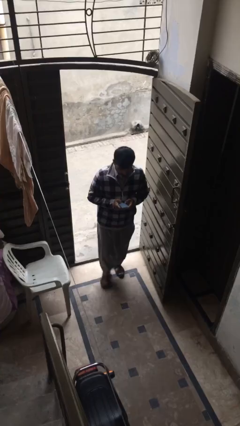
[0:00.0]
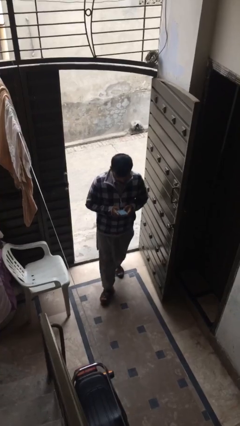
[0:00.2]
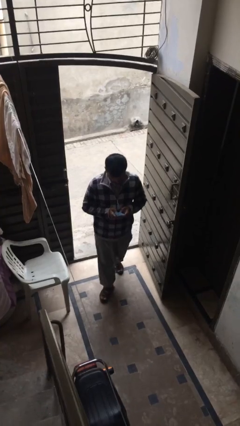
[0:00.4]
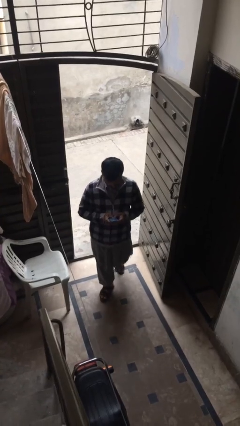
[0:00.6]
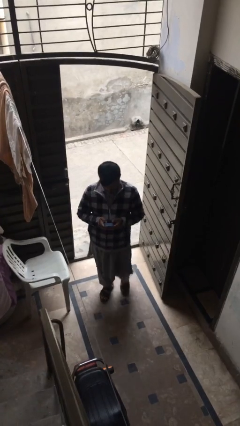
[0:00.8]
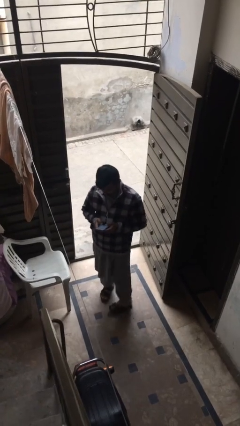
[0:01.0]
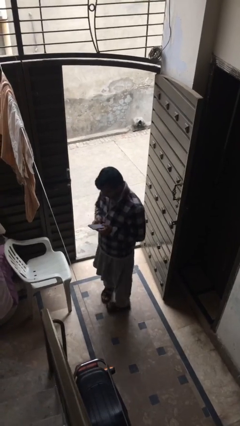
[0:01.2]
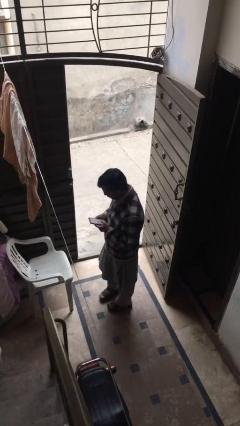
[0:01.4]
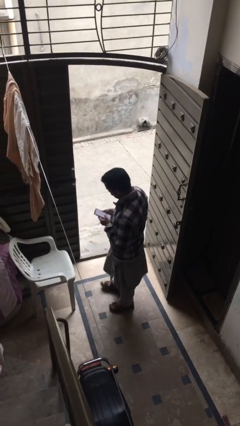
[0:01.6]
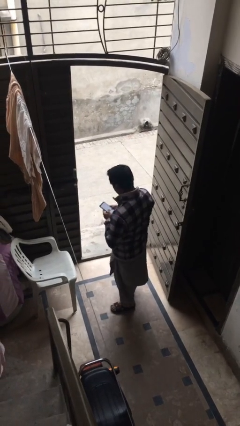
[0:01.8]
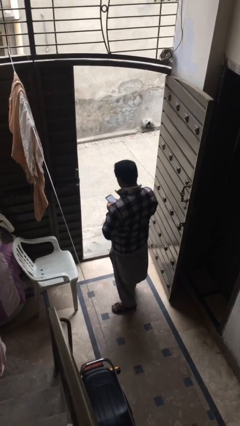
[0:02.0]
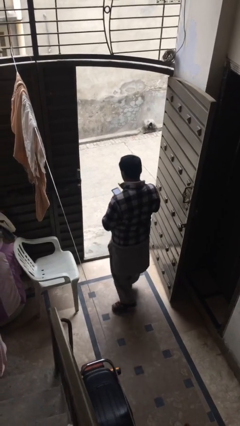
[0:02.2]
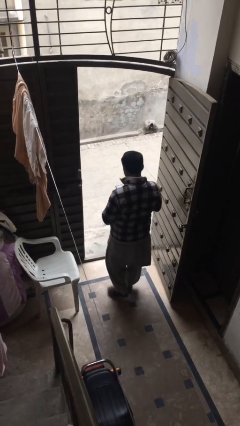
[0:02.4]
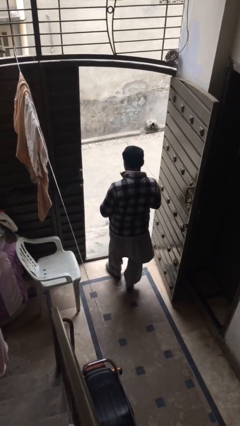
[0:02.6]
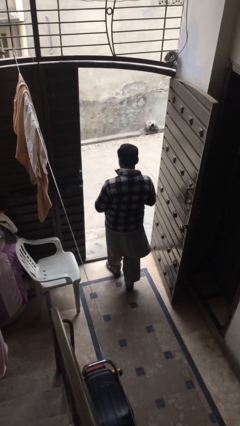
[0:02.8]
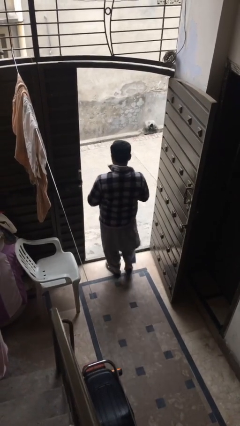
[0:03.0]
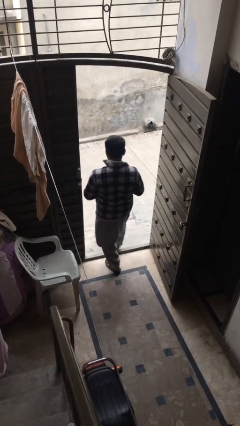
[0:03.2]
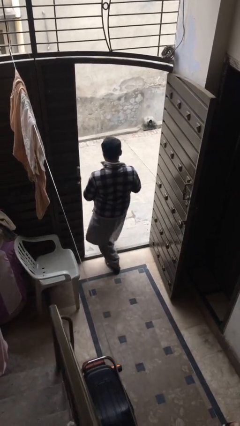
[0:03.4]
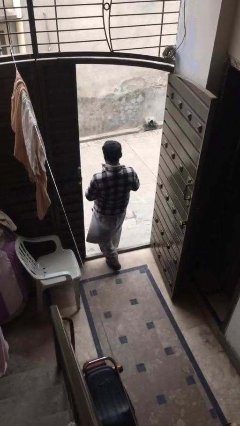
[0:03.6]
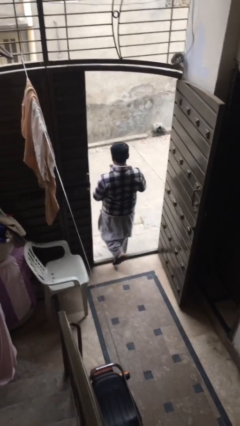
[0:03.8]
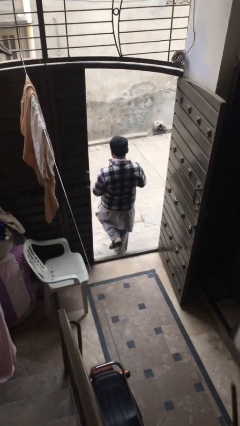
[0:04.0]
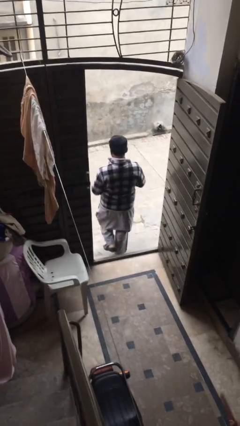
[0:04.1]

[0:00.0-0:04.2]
person exits scene through structure

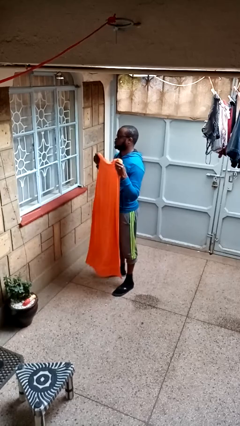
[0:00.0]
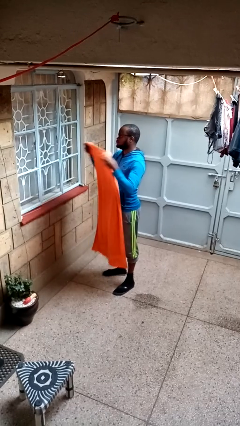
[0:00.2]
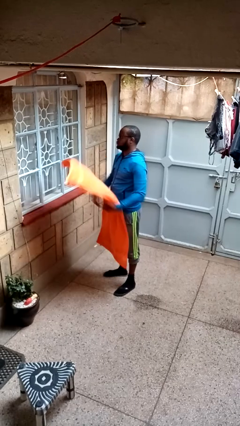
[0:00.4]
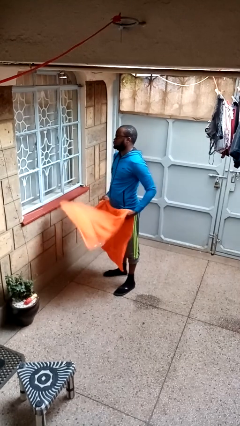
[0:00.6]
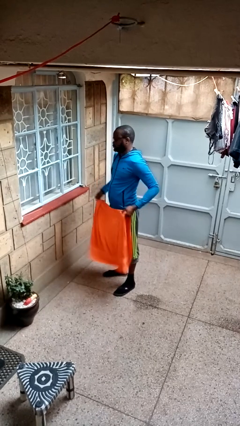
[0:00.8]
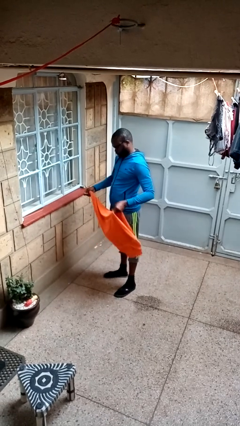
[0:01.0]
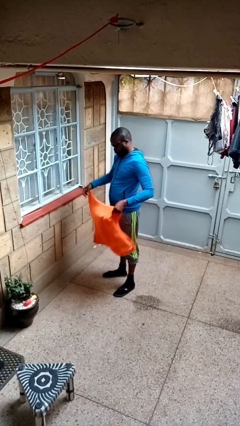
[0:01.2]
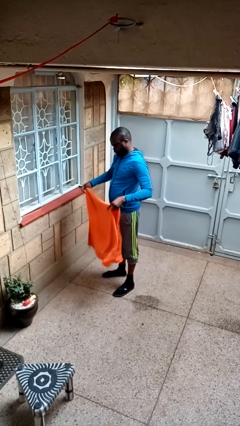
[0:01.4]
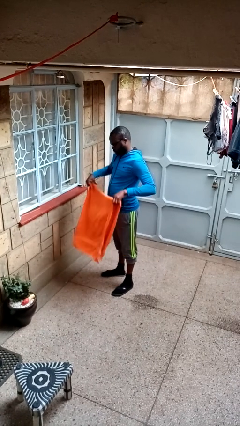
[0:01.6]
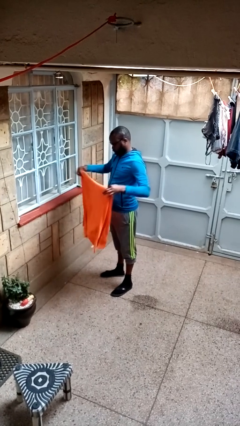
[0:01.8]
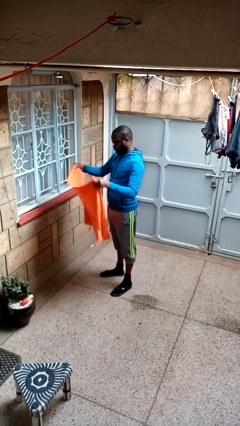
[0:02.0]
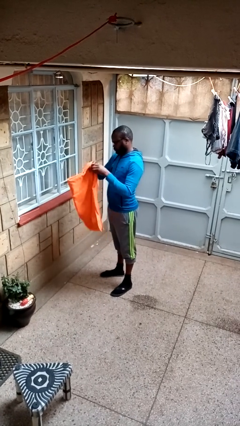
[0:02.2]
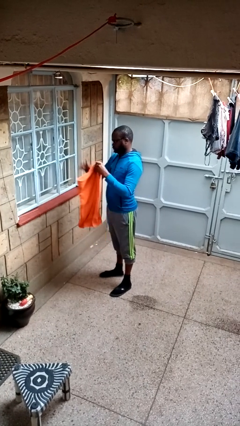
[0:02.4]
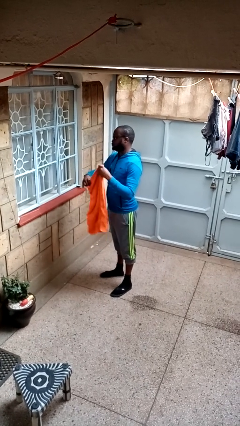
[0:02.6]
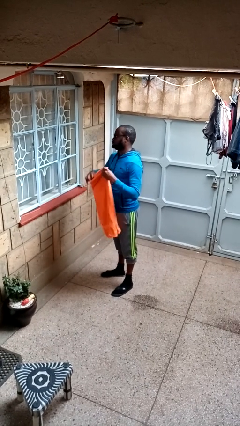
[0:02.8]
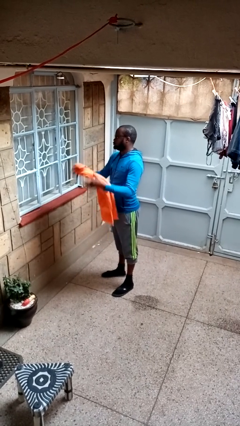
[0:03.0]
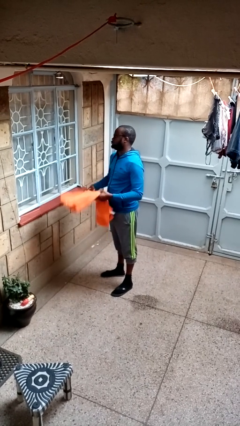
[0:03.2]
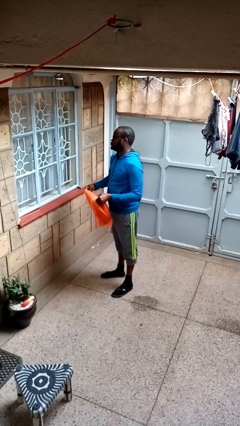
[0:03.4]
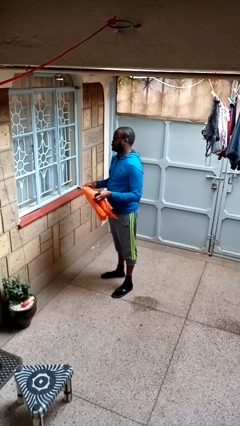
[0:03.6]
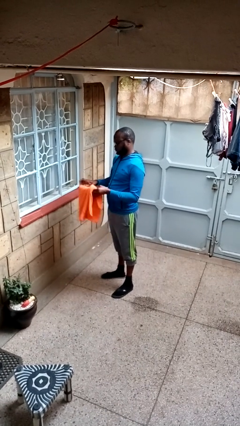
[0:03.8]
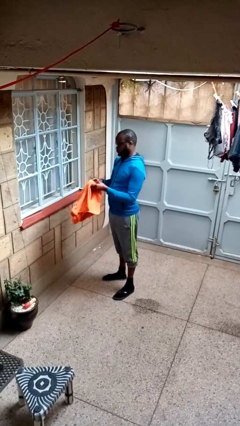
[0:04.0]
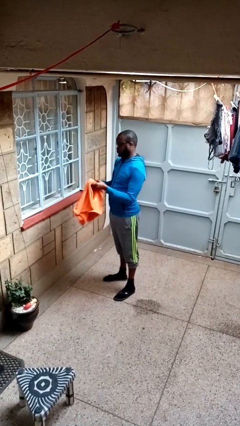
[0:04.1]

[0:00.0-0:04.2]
person folds towel

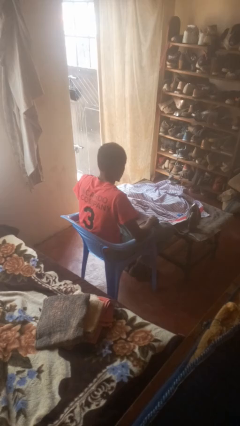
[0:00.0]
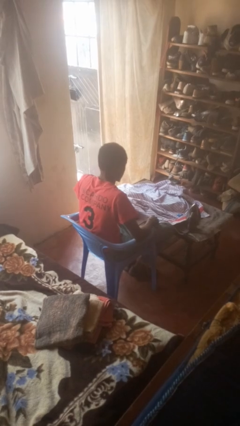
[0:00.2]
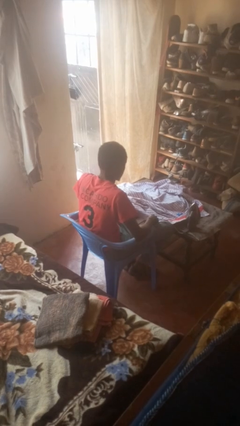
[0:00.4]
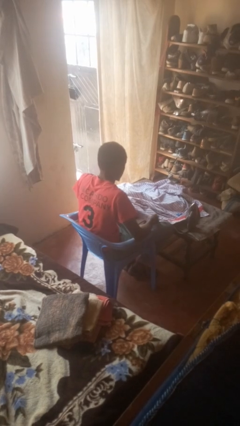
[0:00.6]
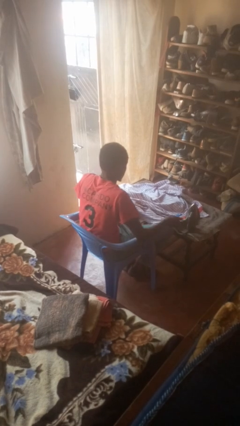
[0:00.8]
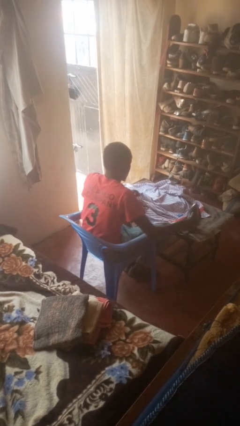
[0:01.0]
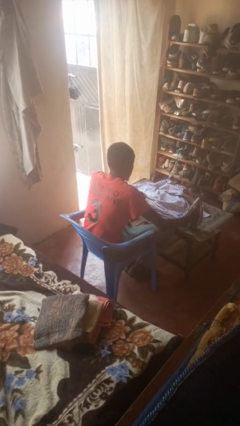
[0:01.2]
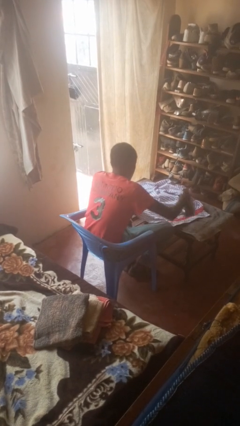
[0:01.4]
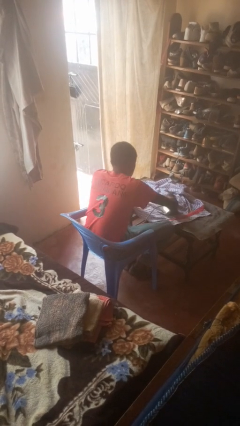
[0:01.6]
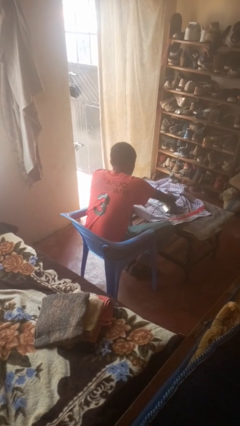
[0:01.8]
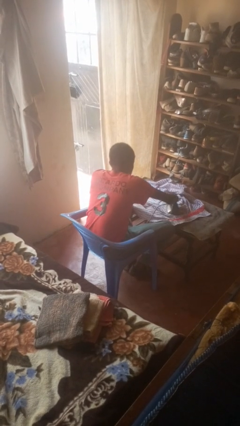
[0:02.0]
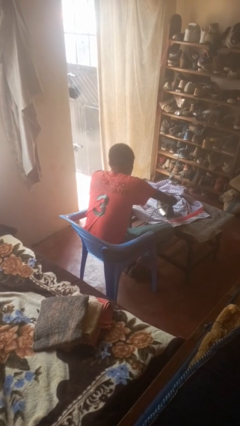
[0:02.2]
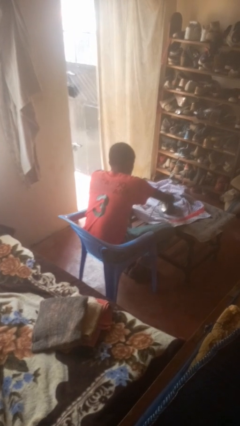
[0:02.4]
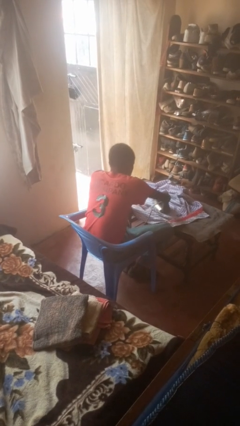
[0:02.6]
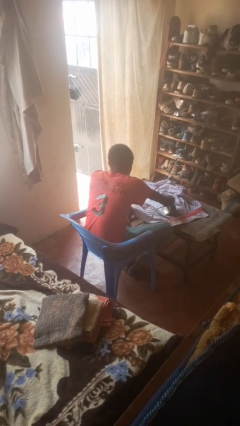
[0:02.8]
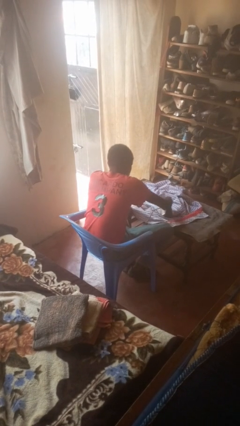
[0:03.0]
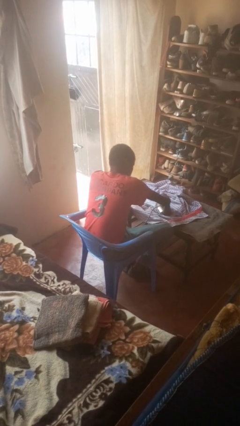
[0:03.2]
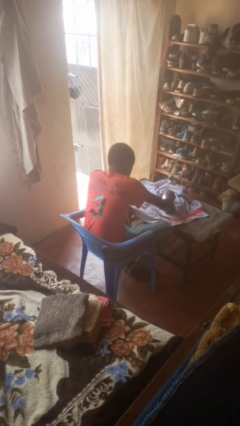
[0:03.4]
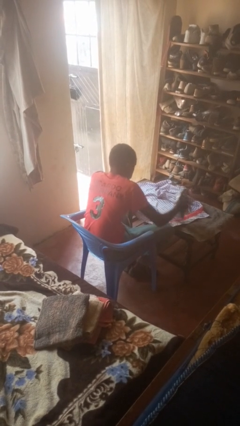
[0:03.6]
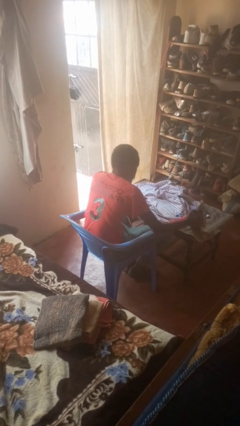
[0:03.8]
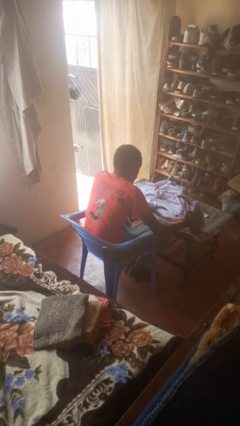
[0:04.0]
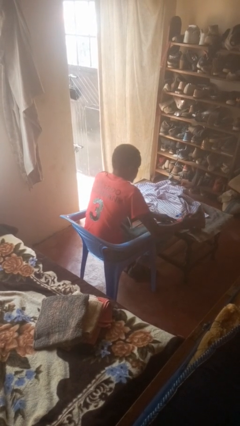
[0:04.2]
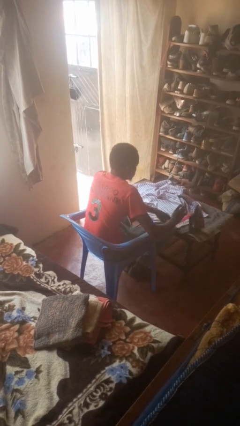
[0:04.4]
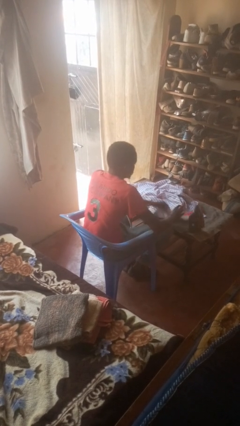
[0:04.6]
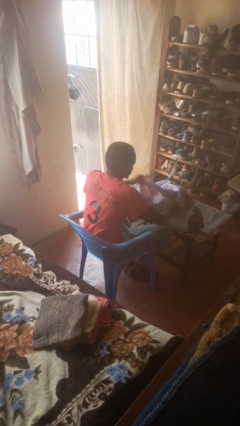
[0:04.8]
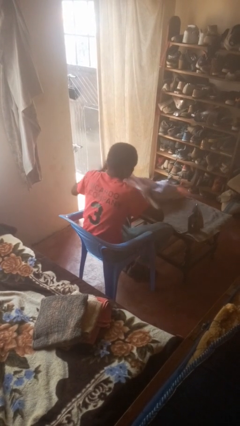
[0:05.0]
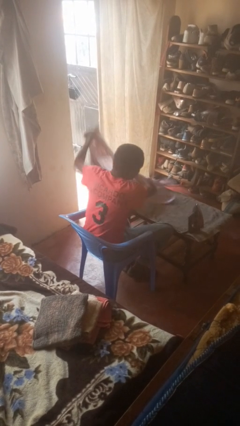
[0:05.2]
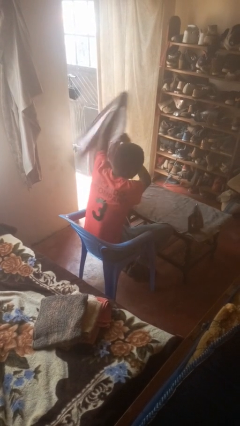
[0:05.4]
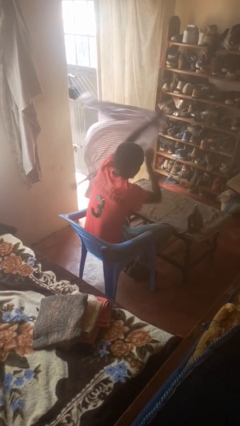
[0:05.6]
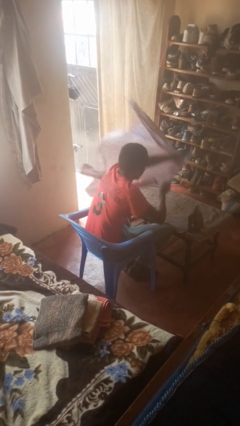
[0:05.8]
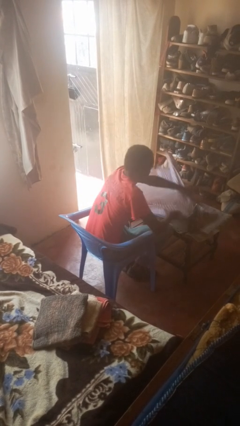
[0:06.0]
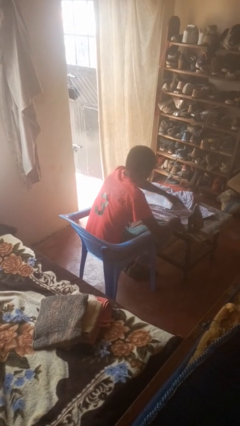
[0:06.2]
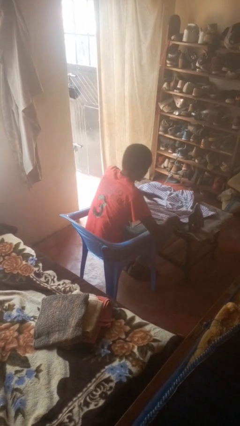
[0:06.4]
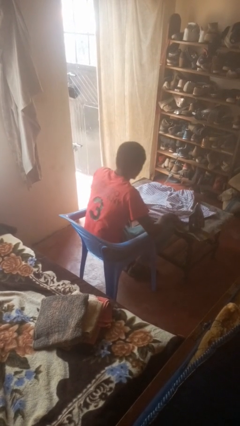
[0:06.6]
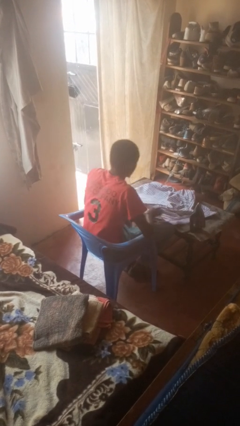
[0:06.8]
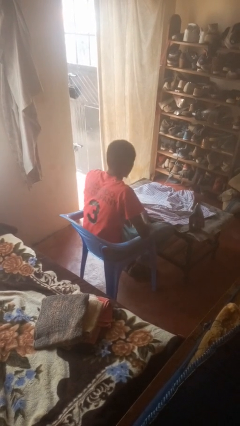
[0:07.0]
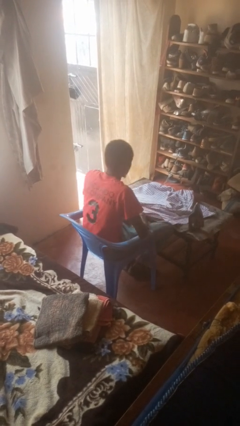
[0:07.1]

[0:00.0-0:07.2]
person irons clothes

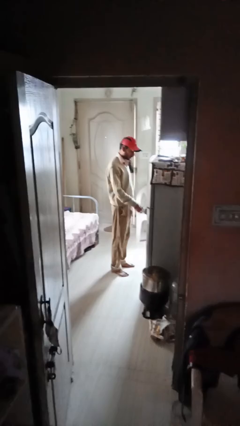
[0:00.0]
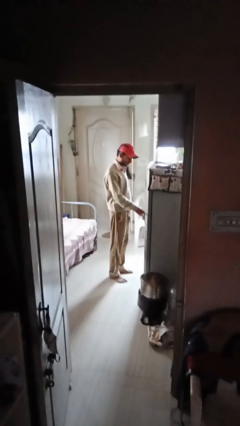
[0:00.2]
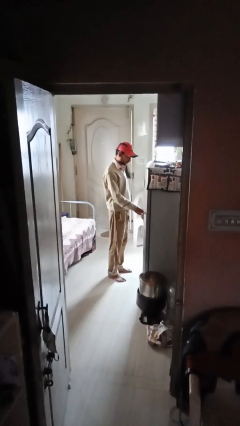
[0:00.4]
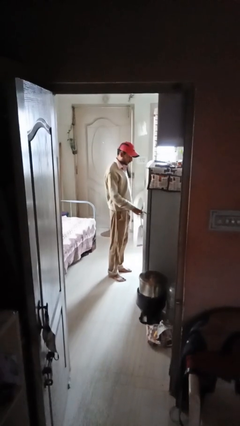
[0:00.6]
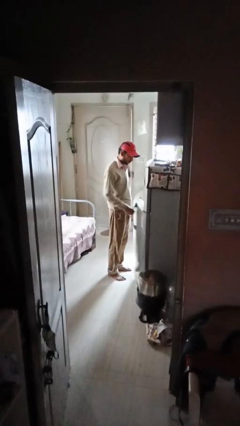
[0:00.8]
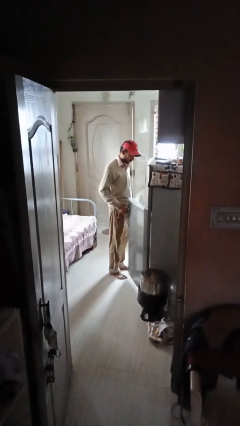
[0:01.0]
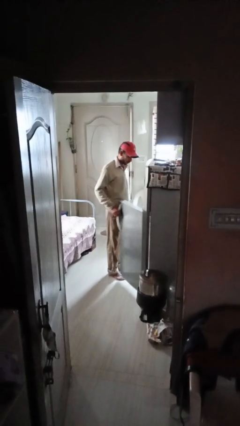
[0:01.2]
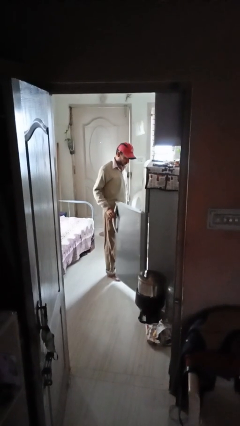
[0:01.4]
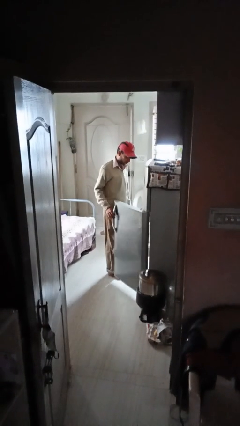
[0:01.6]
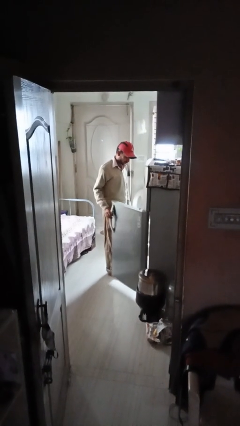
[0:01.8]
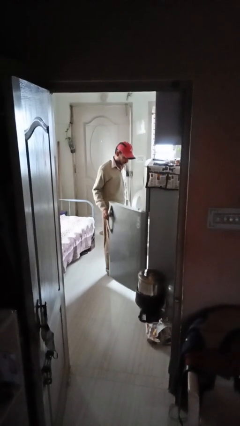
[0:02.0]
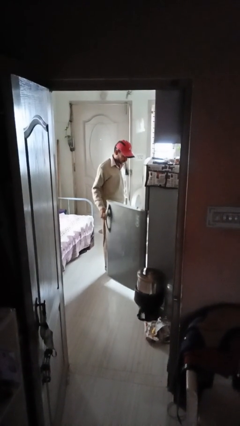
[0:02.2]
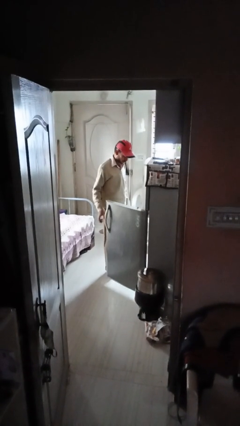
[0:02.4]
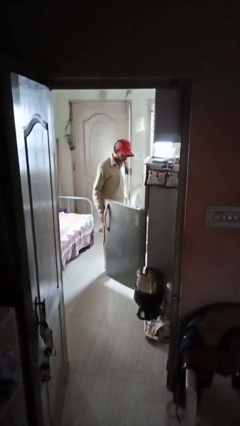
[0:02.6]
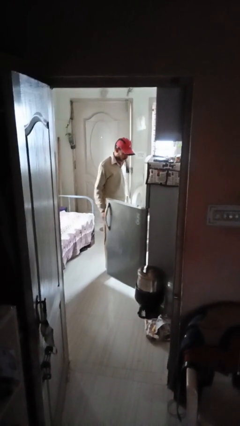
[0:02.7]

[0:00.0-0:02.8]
person opens refrigerator
